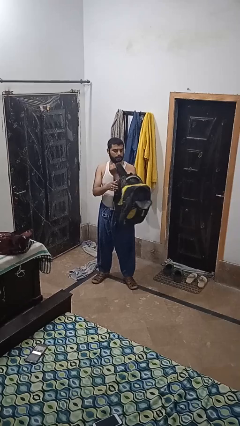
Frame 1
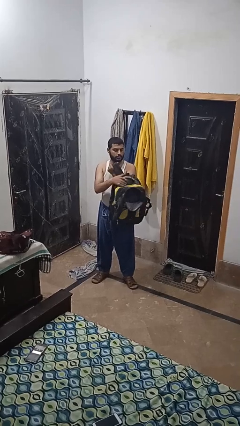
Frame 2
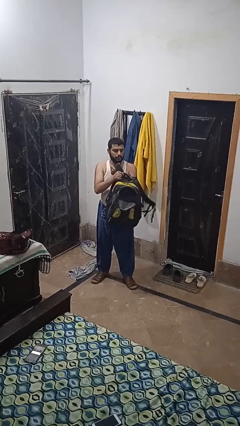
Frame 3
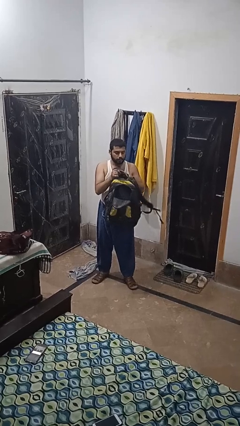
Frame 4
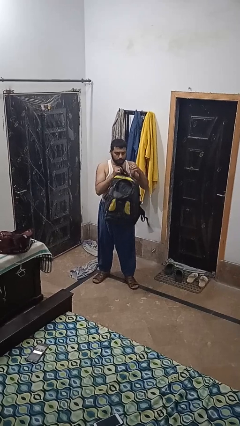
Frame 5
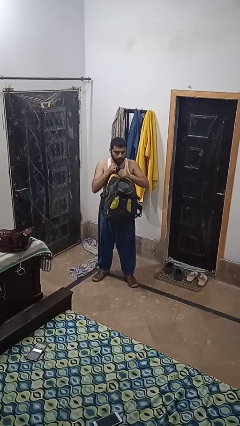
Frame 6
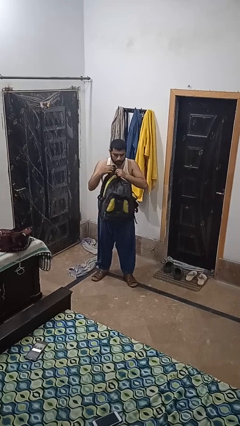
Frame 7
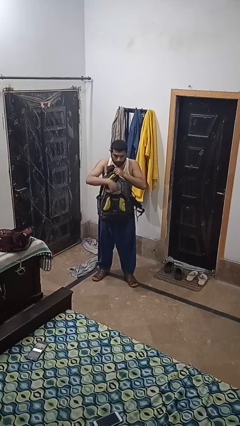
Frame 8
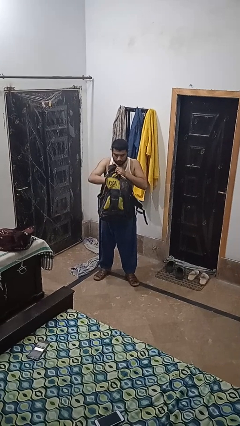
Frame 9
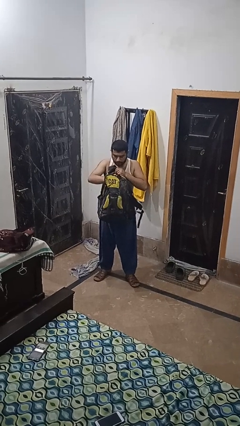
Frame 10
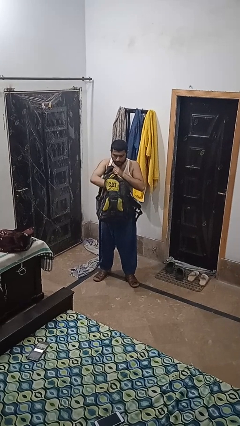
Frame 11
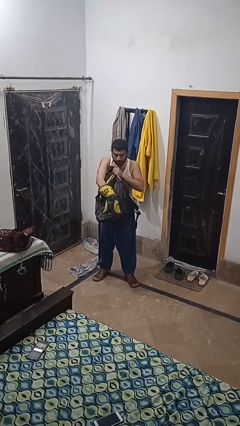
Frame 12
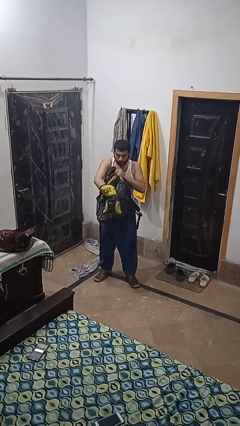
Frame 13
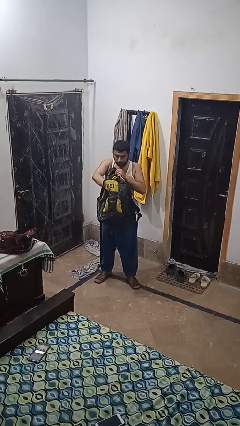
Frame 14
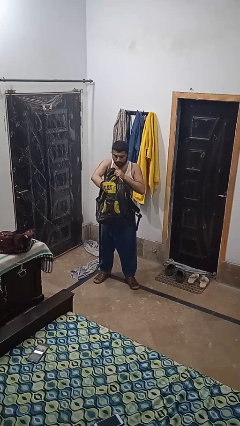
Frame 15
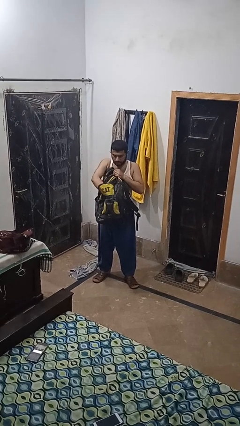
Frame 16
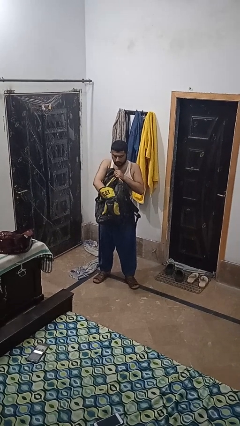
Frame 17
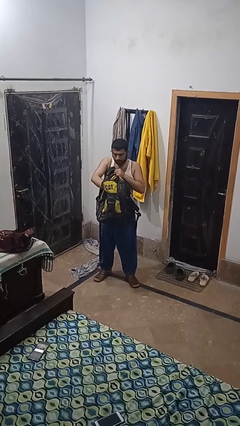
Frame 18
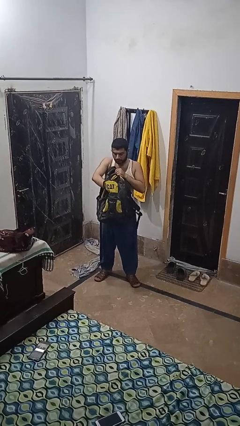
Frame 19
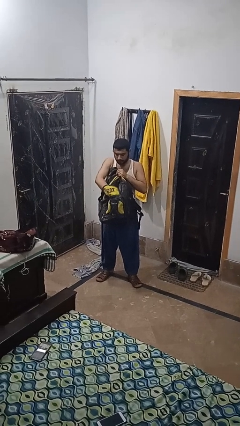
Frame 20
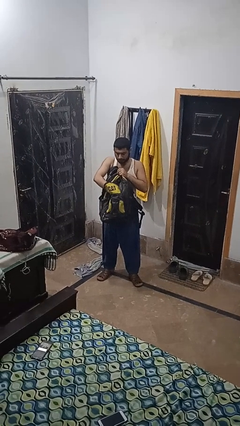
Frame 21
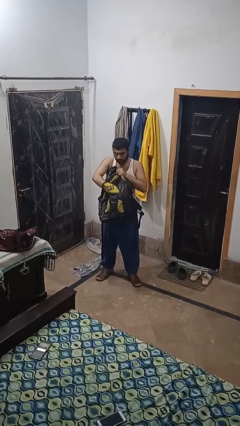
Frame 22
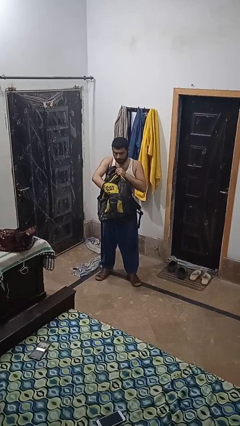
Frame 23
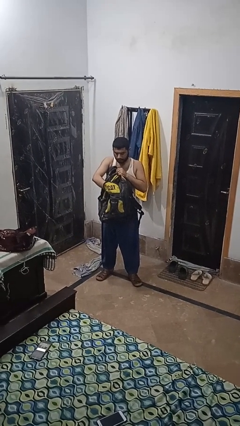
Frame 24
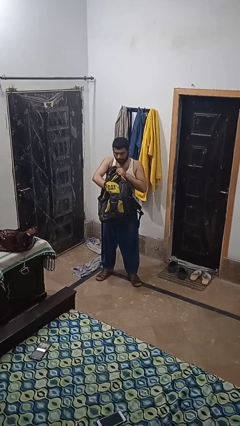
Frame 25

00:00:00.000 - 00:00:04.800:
person searches in backpack

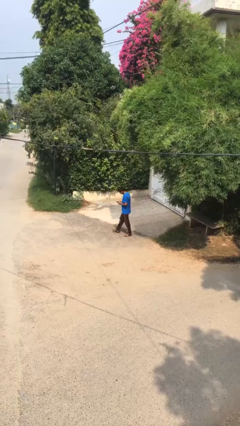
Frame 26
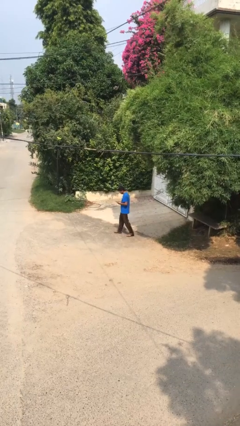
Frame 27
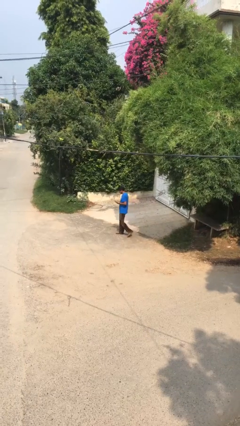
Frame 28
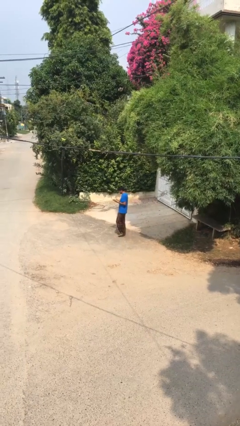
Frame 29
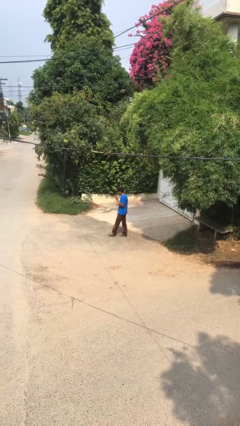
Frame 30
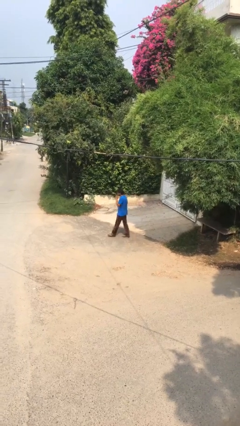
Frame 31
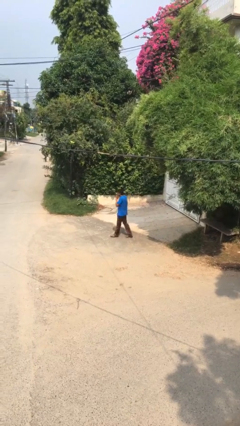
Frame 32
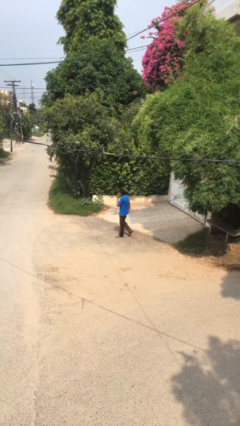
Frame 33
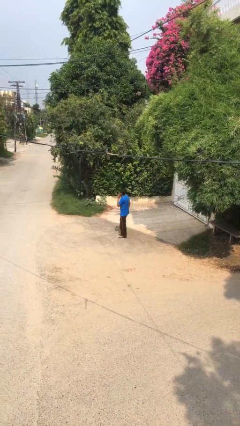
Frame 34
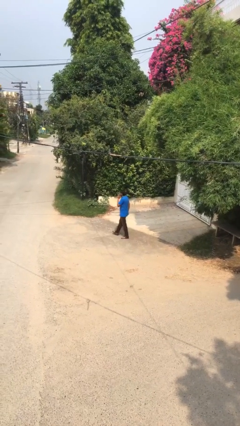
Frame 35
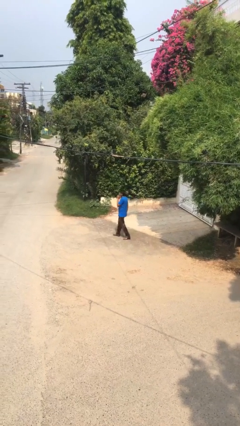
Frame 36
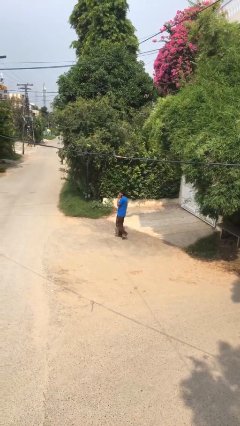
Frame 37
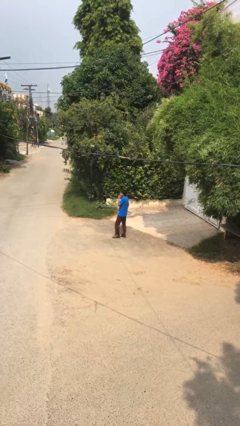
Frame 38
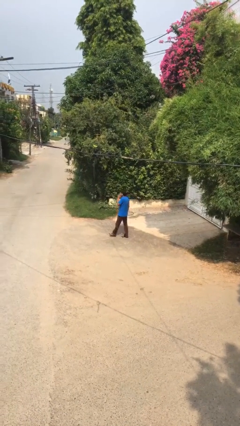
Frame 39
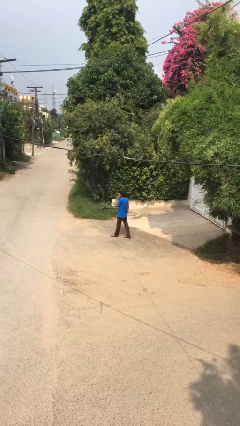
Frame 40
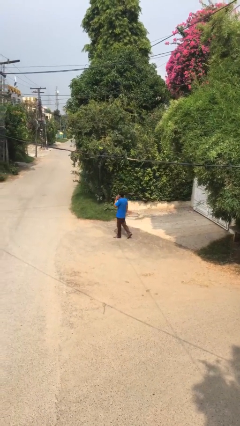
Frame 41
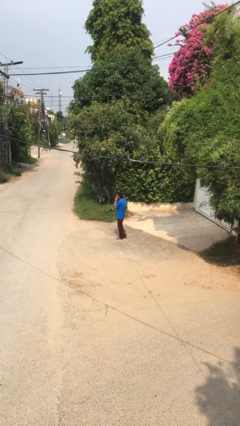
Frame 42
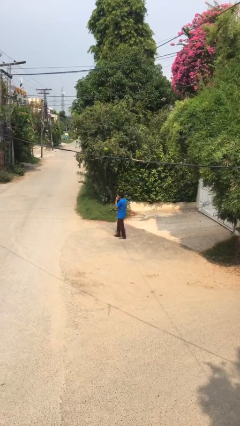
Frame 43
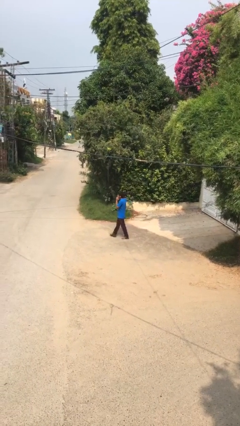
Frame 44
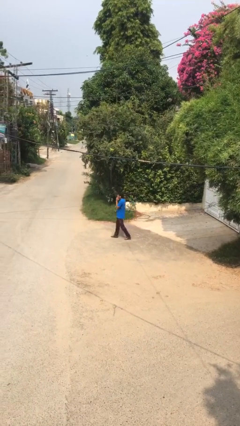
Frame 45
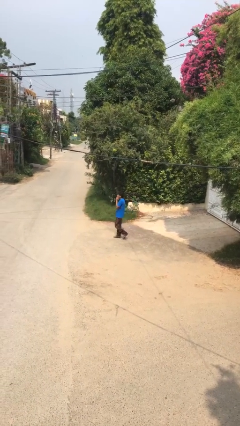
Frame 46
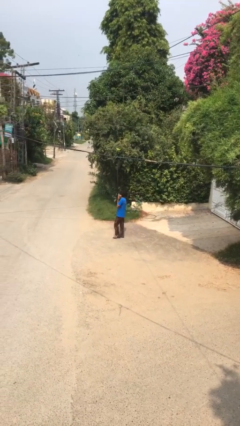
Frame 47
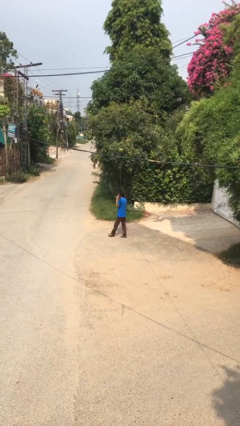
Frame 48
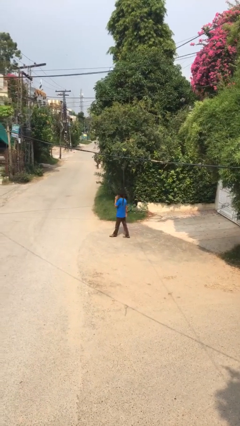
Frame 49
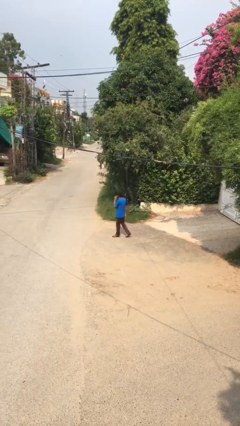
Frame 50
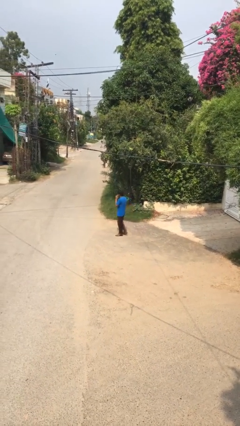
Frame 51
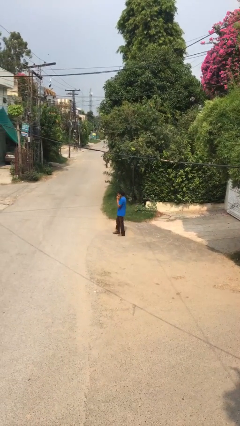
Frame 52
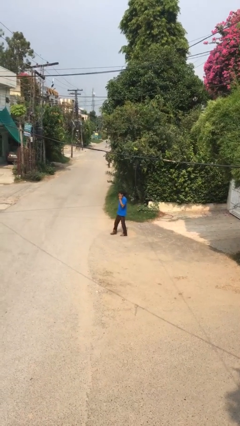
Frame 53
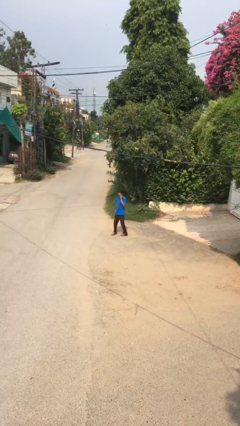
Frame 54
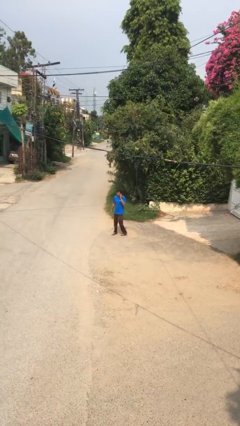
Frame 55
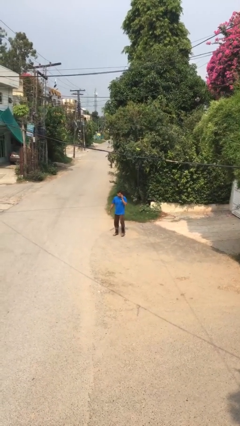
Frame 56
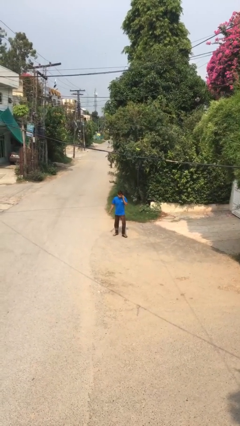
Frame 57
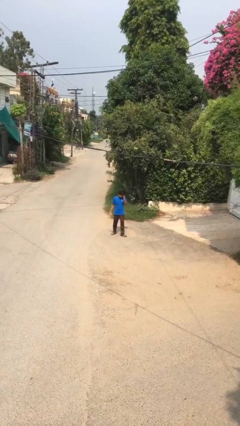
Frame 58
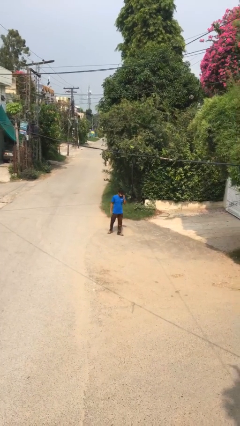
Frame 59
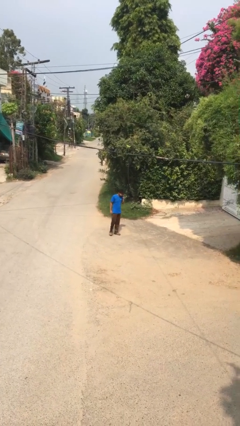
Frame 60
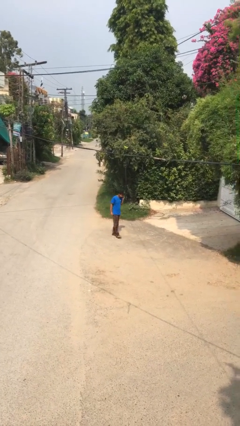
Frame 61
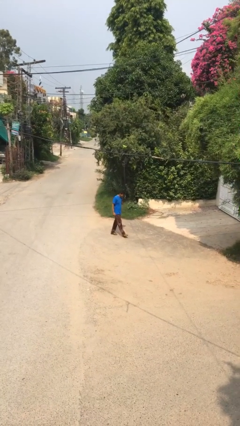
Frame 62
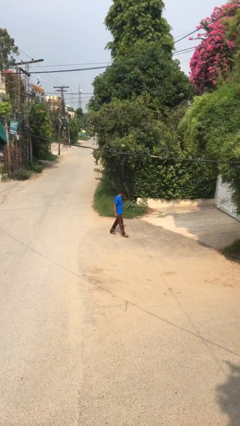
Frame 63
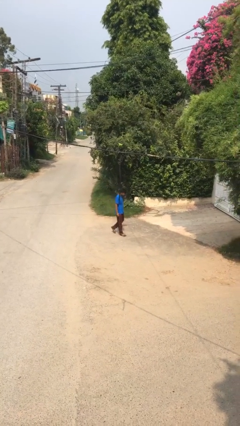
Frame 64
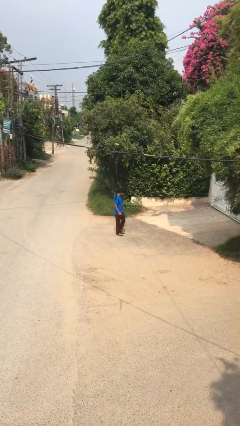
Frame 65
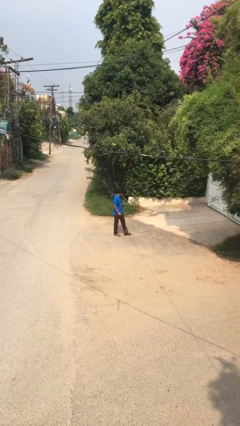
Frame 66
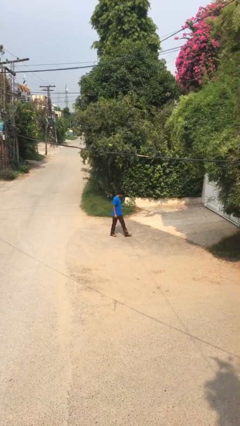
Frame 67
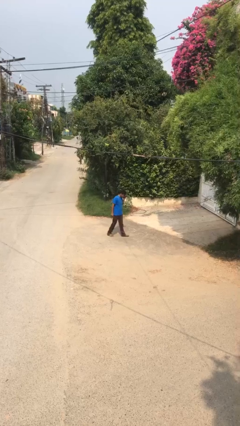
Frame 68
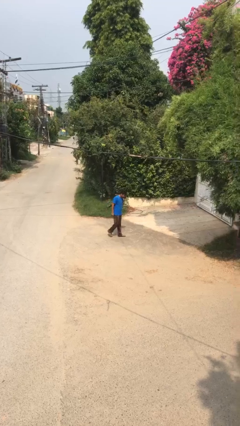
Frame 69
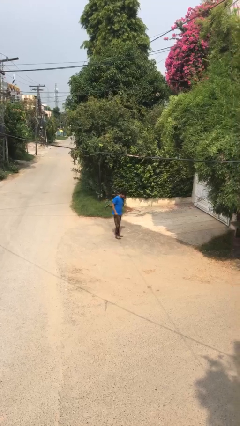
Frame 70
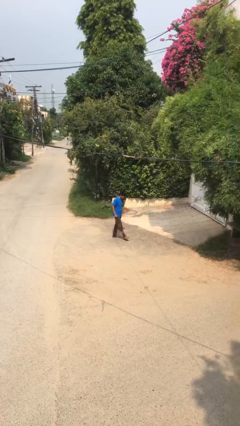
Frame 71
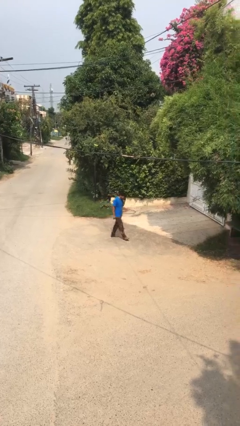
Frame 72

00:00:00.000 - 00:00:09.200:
person talks on phone

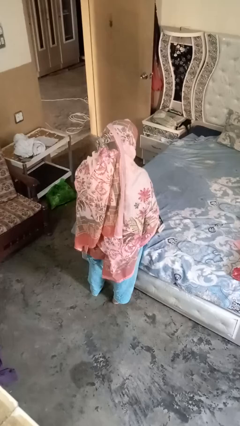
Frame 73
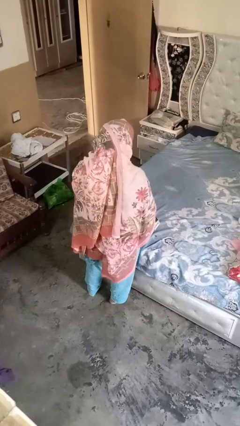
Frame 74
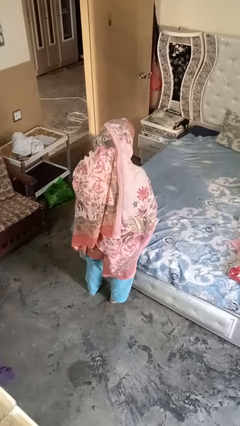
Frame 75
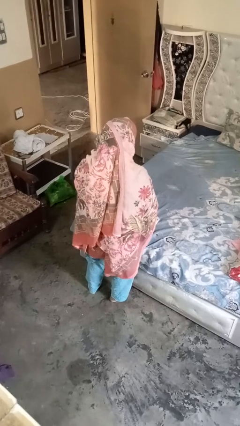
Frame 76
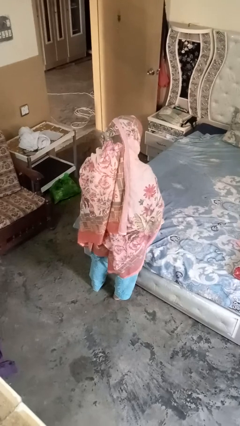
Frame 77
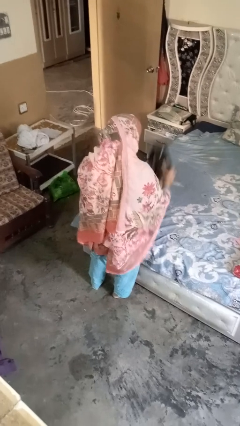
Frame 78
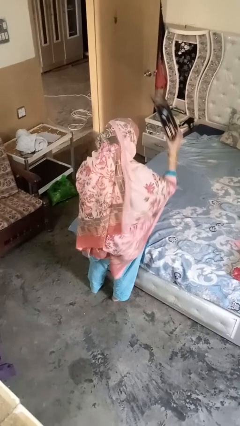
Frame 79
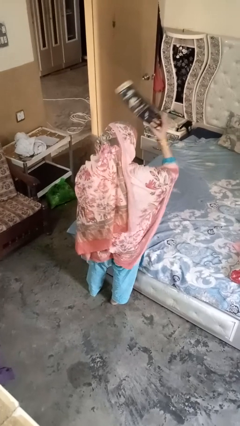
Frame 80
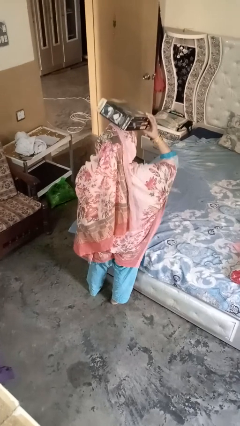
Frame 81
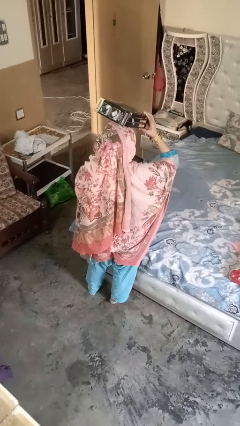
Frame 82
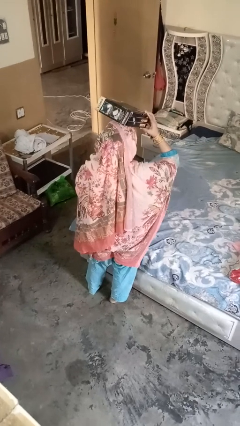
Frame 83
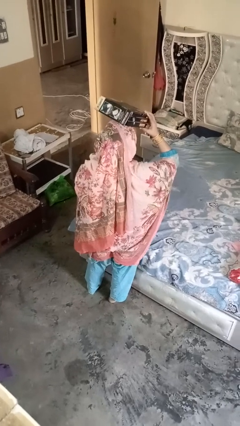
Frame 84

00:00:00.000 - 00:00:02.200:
person holds object above head

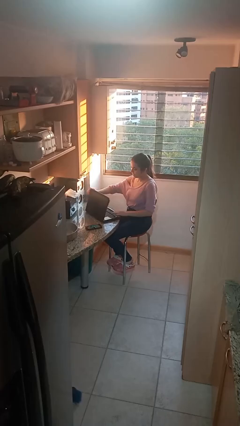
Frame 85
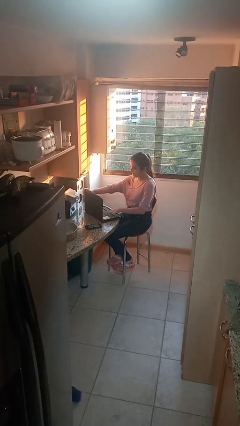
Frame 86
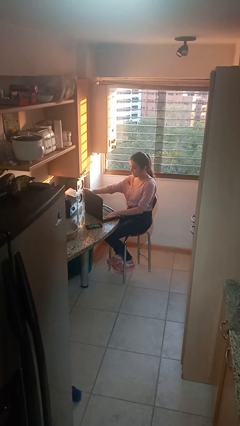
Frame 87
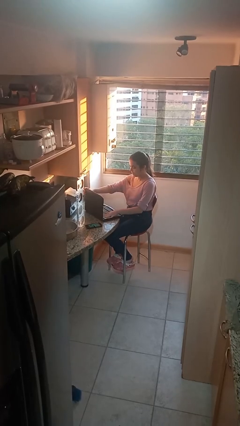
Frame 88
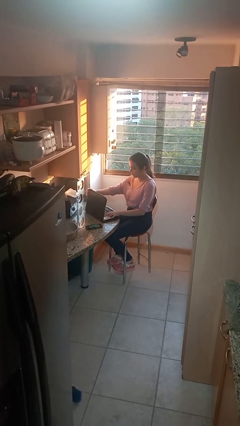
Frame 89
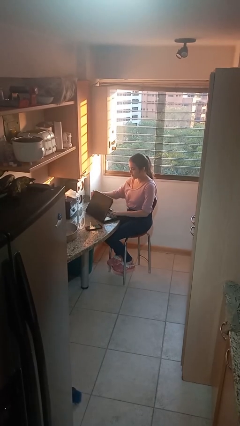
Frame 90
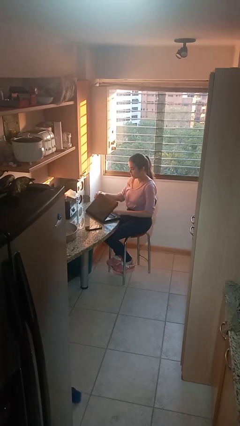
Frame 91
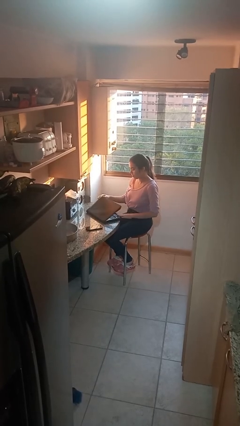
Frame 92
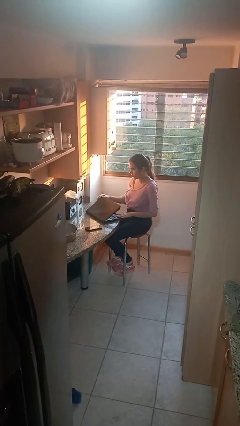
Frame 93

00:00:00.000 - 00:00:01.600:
person interacts with laptop

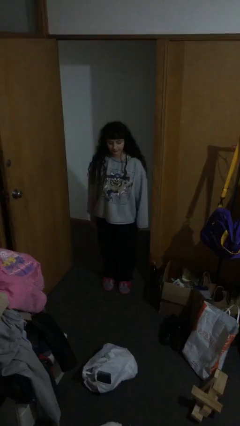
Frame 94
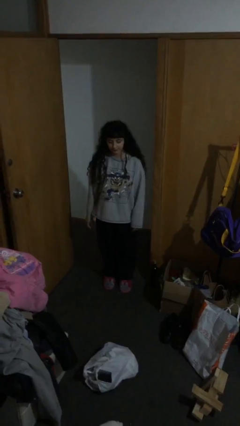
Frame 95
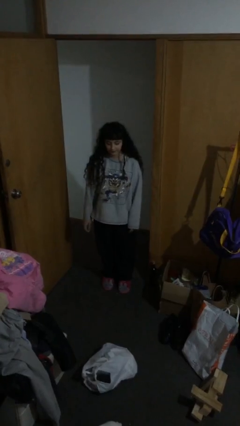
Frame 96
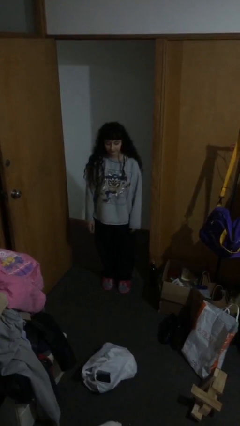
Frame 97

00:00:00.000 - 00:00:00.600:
person throws object to ground
